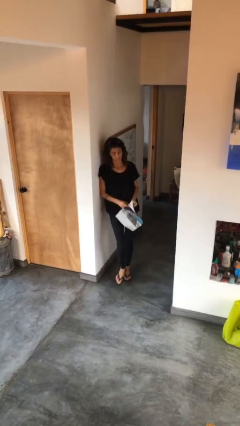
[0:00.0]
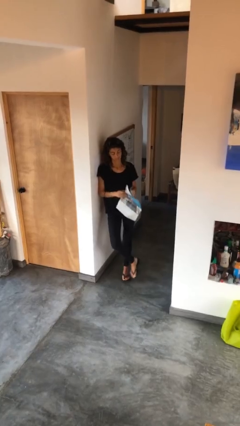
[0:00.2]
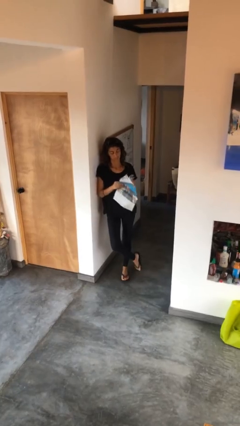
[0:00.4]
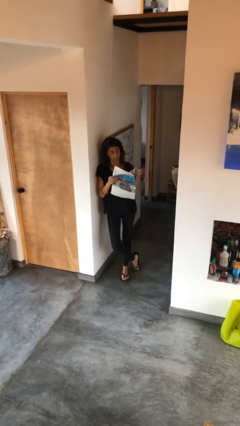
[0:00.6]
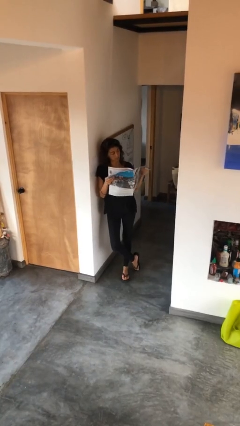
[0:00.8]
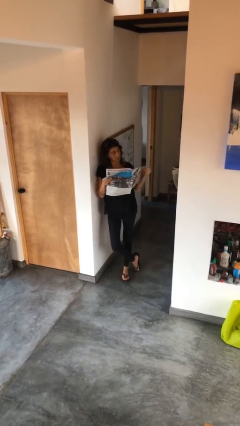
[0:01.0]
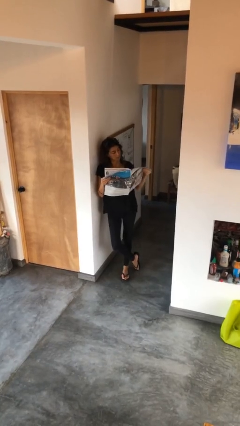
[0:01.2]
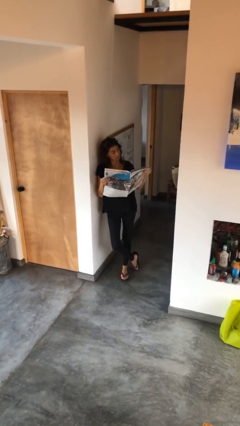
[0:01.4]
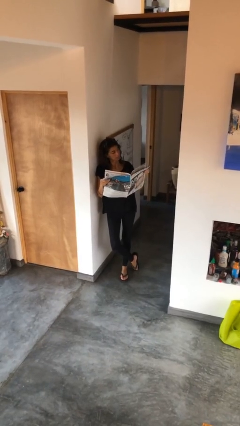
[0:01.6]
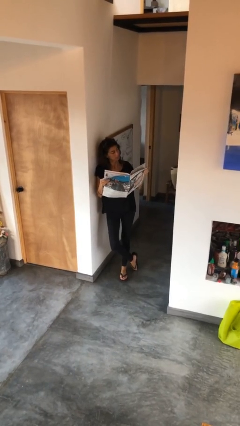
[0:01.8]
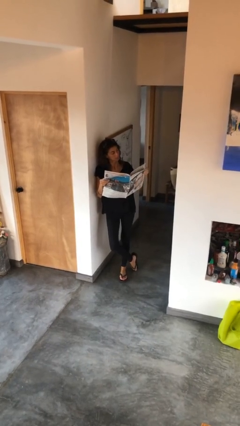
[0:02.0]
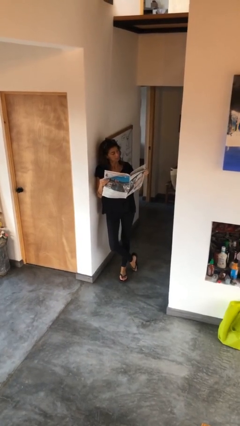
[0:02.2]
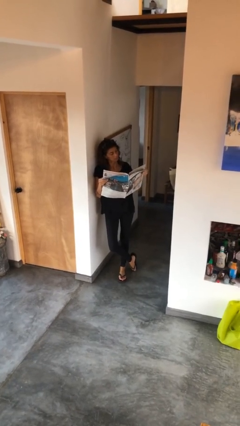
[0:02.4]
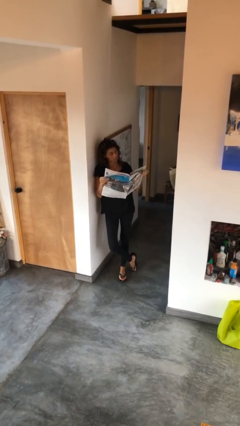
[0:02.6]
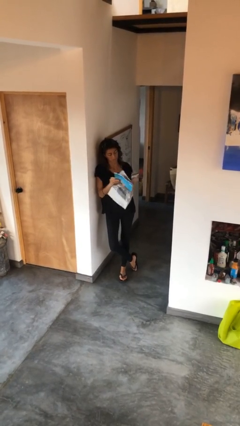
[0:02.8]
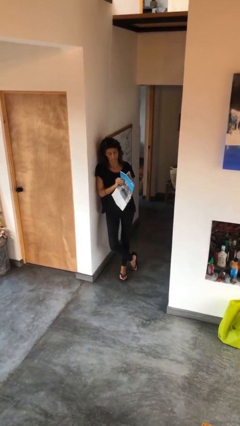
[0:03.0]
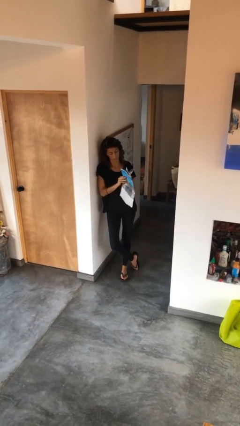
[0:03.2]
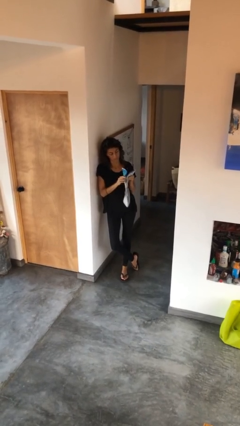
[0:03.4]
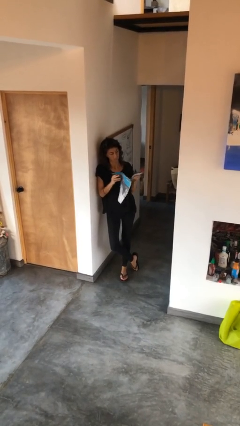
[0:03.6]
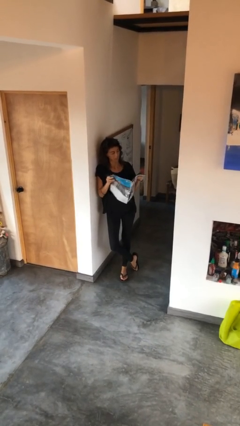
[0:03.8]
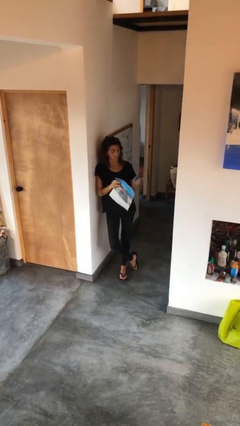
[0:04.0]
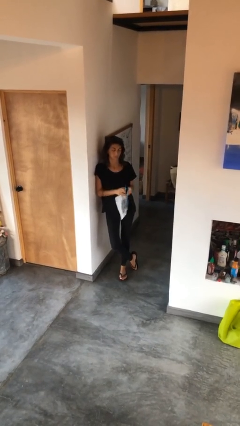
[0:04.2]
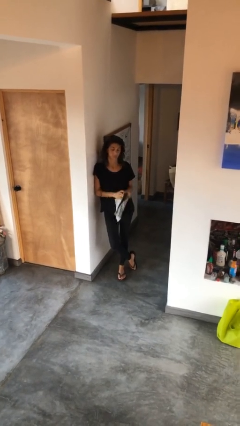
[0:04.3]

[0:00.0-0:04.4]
person reads newspaper

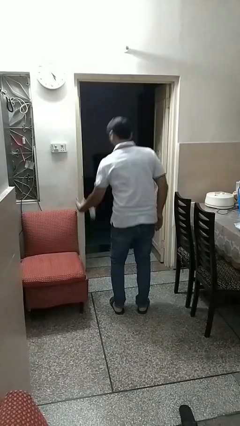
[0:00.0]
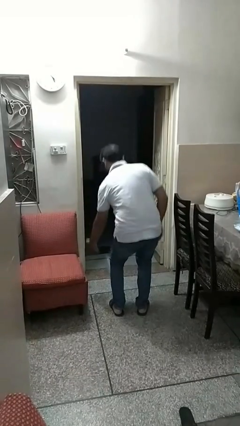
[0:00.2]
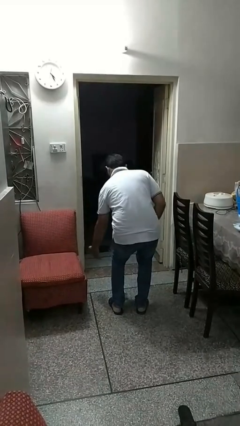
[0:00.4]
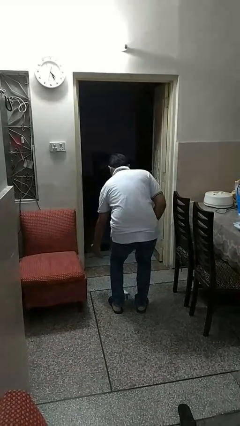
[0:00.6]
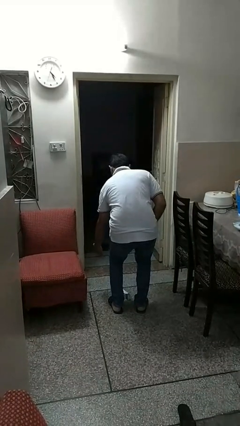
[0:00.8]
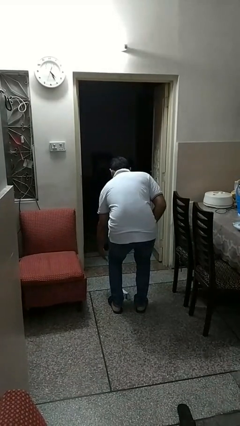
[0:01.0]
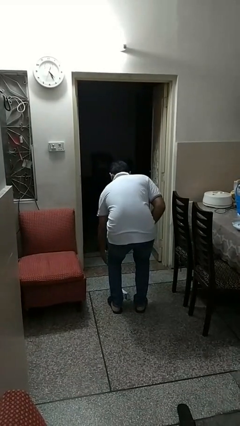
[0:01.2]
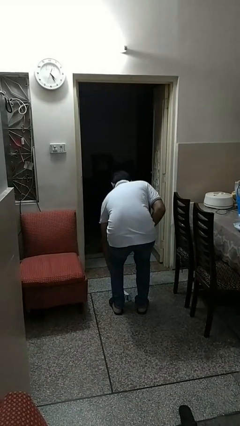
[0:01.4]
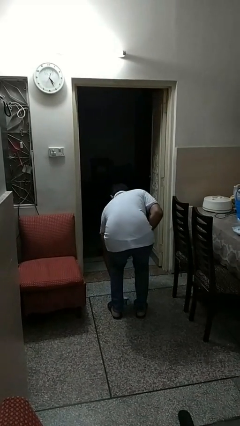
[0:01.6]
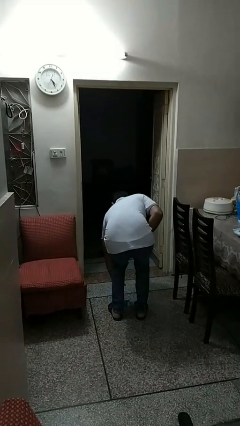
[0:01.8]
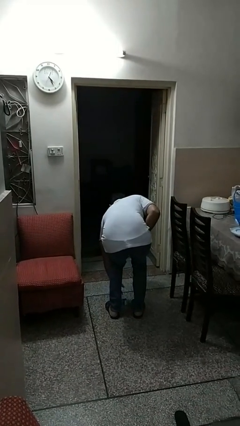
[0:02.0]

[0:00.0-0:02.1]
person catches dropped object

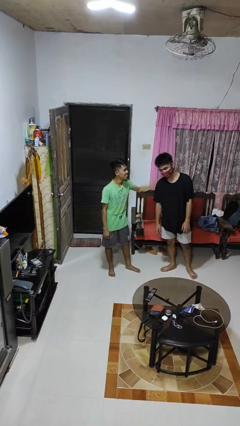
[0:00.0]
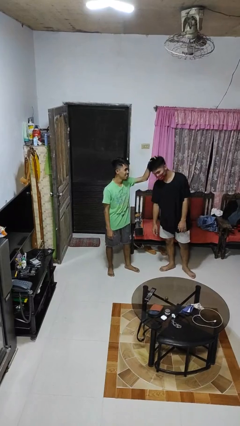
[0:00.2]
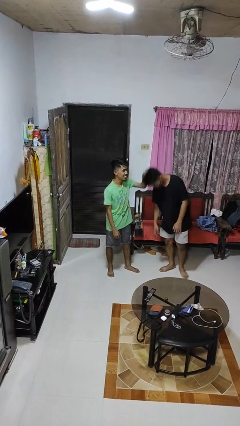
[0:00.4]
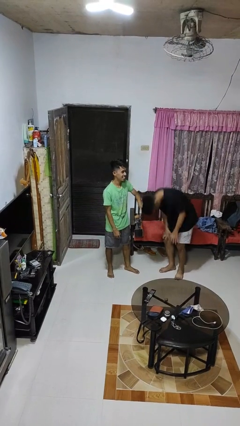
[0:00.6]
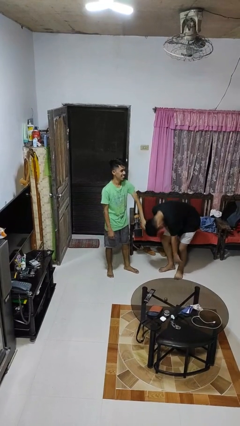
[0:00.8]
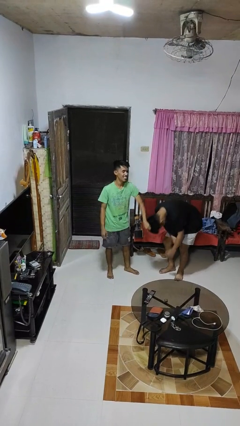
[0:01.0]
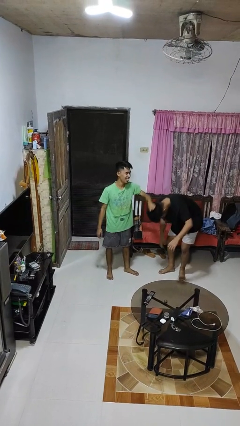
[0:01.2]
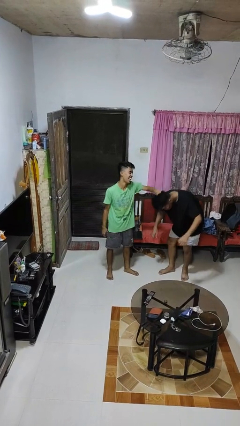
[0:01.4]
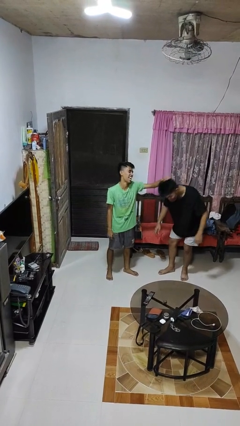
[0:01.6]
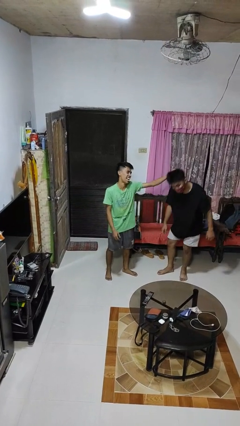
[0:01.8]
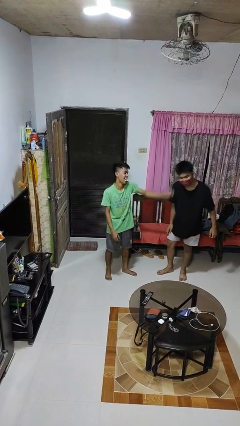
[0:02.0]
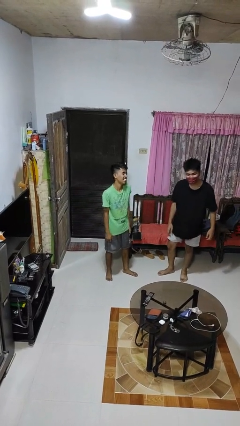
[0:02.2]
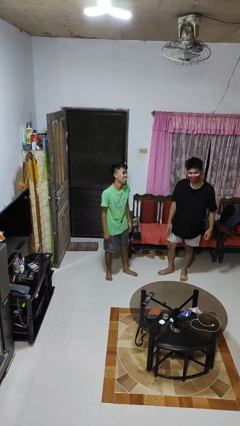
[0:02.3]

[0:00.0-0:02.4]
person grabs person by hair

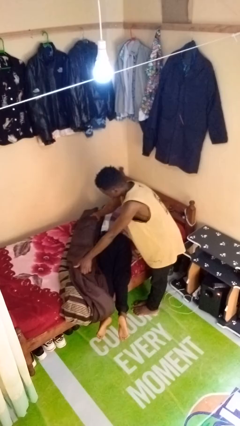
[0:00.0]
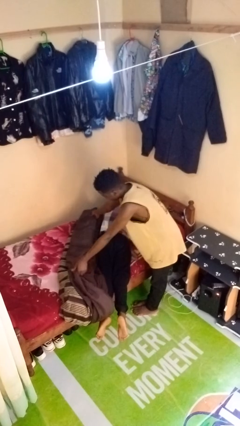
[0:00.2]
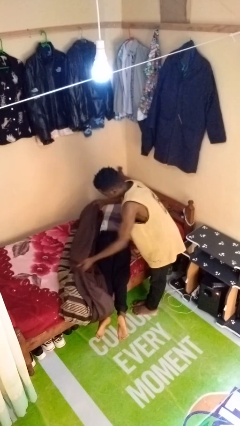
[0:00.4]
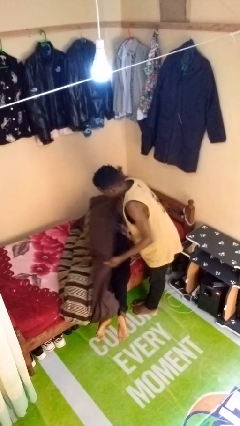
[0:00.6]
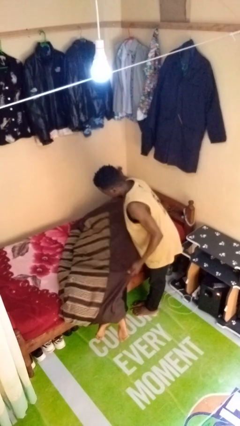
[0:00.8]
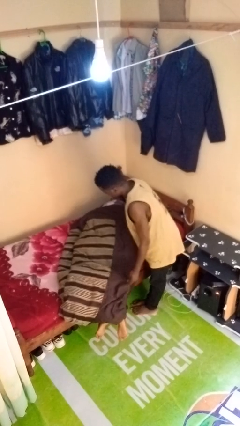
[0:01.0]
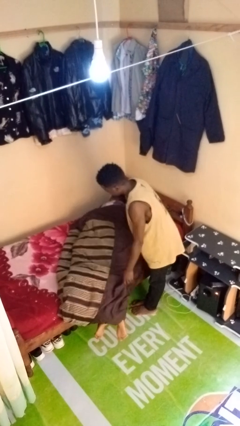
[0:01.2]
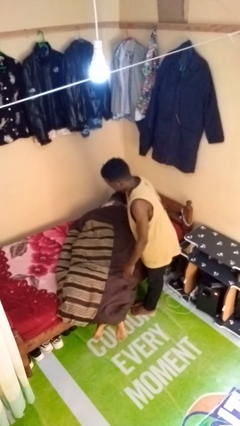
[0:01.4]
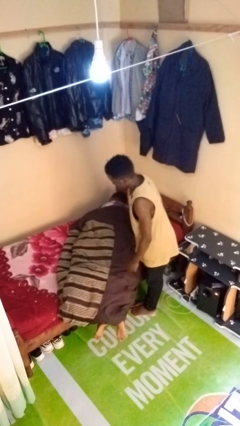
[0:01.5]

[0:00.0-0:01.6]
person covers friend with blanket

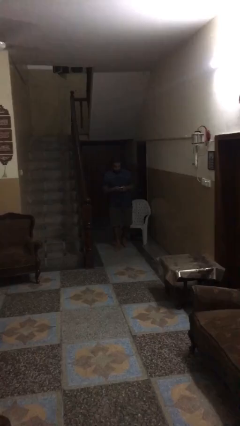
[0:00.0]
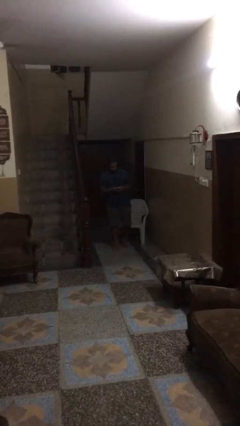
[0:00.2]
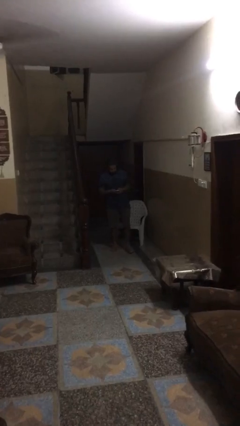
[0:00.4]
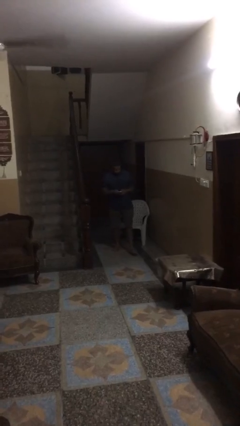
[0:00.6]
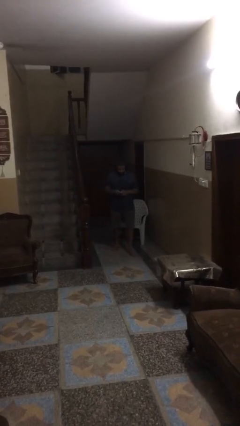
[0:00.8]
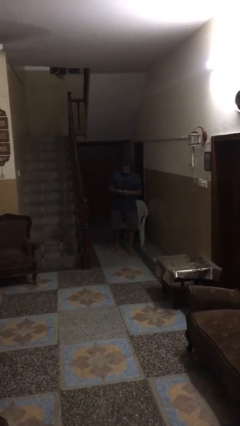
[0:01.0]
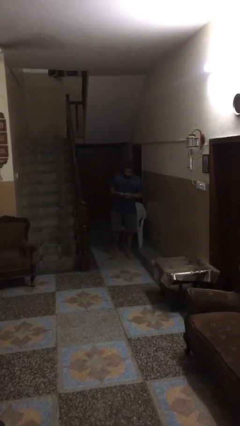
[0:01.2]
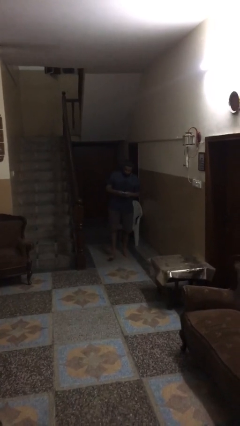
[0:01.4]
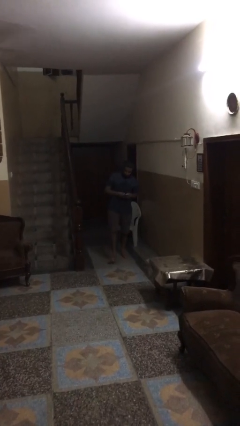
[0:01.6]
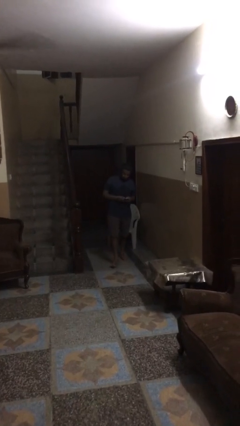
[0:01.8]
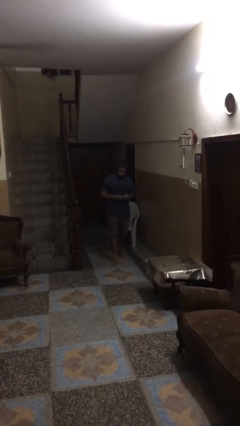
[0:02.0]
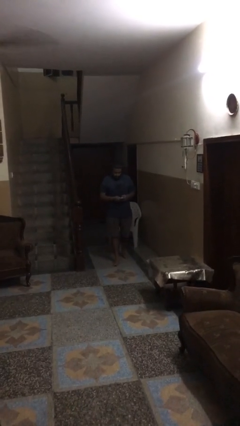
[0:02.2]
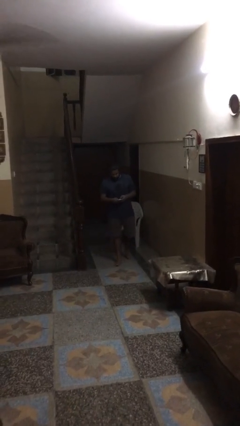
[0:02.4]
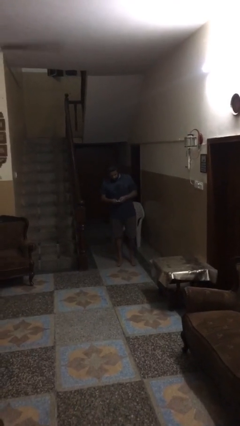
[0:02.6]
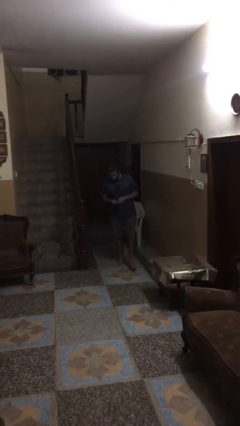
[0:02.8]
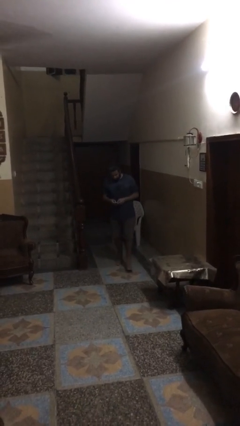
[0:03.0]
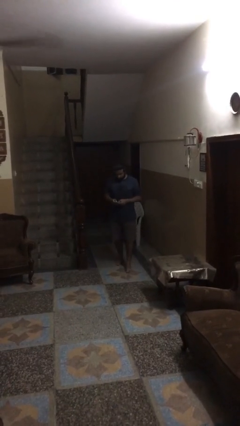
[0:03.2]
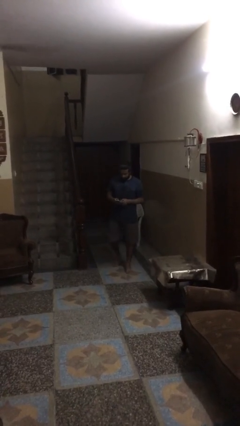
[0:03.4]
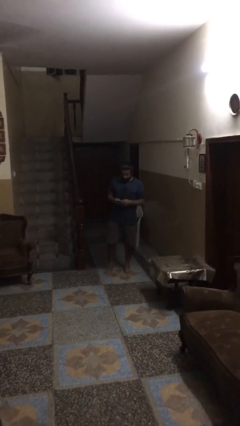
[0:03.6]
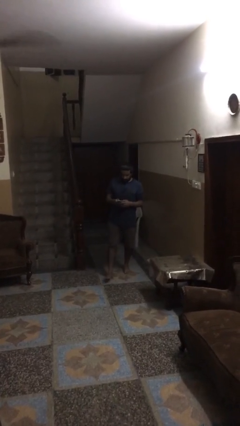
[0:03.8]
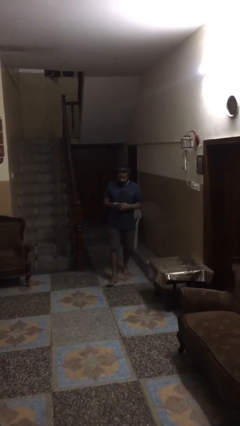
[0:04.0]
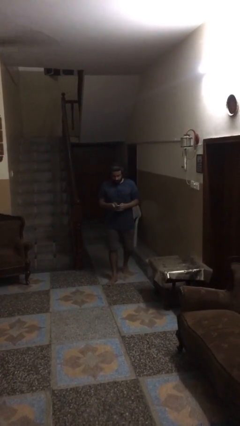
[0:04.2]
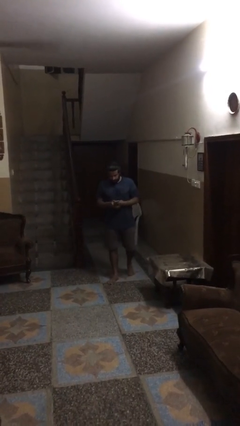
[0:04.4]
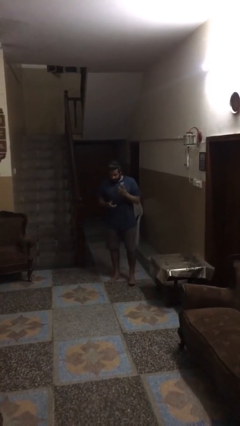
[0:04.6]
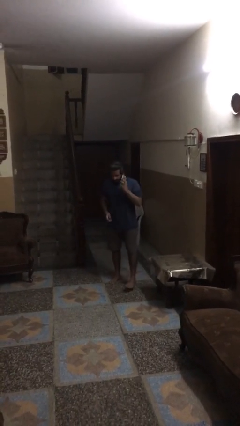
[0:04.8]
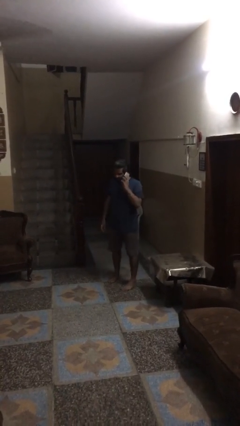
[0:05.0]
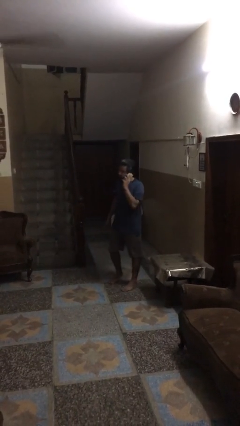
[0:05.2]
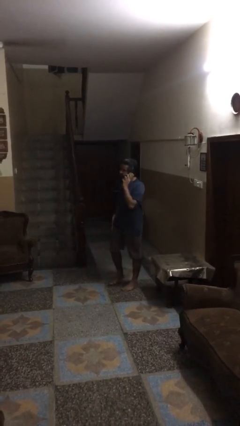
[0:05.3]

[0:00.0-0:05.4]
person texts on phone

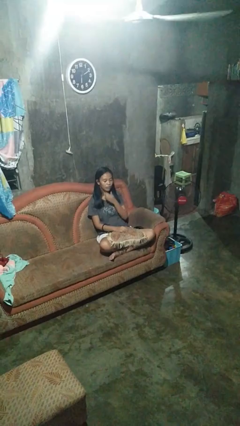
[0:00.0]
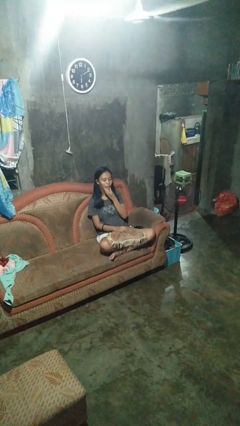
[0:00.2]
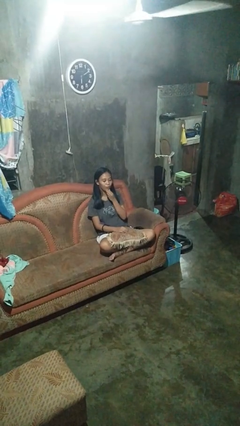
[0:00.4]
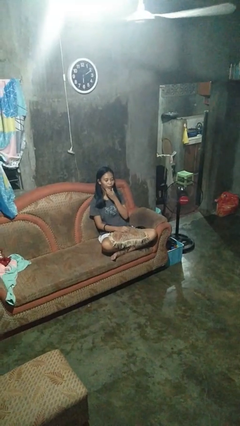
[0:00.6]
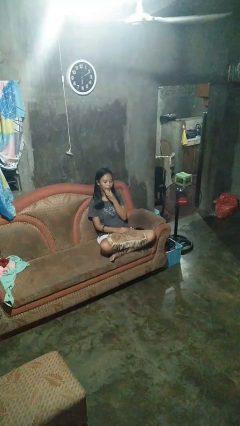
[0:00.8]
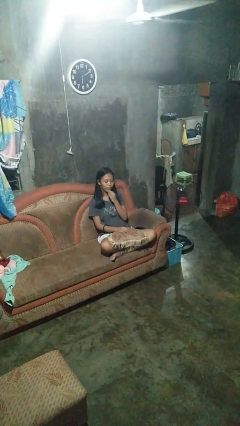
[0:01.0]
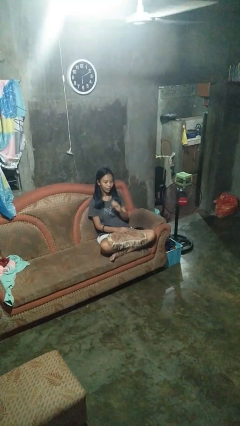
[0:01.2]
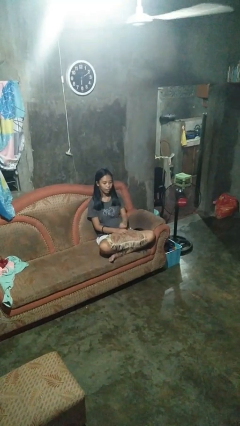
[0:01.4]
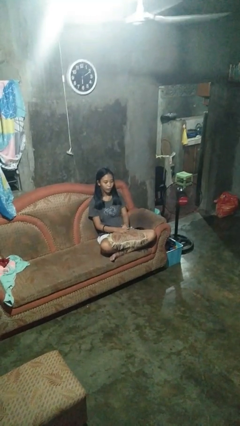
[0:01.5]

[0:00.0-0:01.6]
person strokes chin

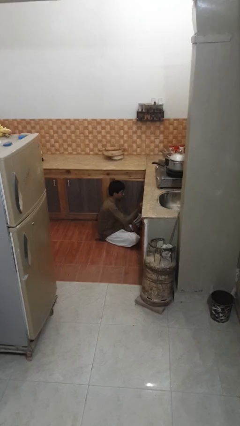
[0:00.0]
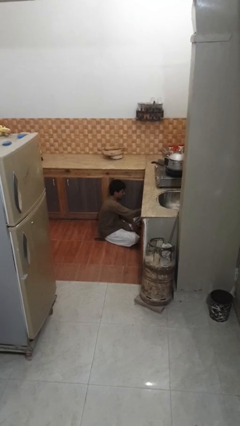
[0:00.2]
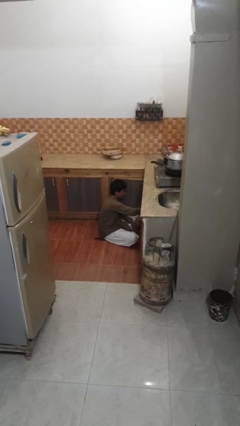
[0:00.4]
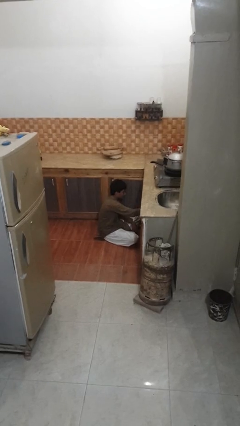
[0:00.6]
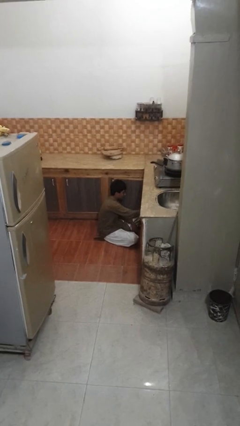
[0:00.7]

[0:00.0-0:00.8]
person puts object into kitchen drawer
